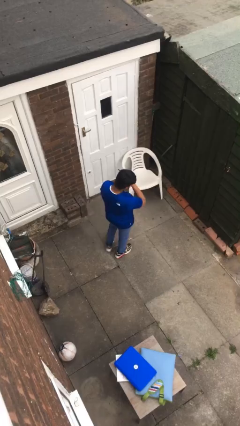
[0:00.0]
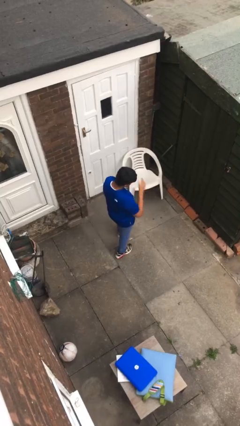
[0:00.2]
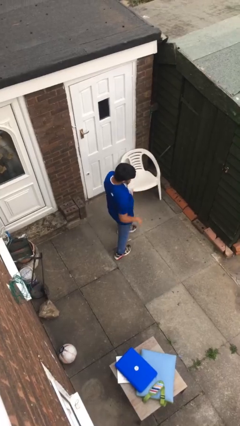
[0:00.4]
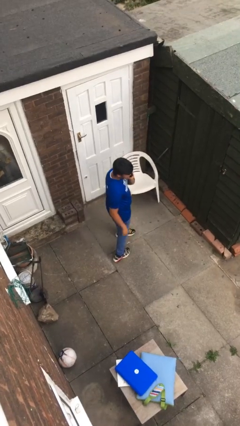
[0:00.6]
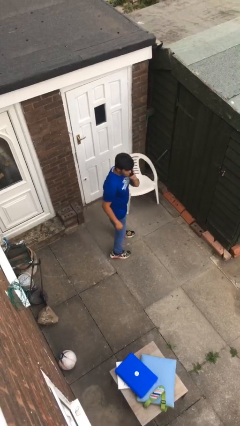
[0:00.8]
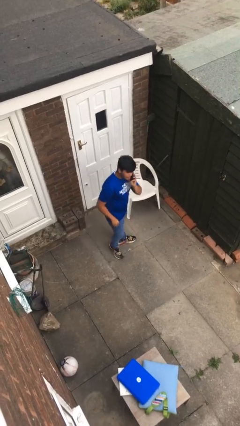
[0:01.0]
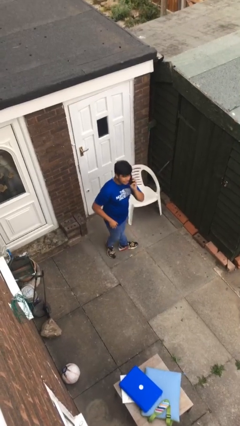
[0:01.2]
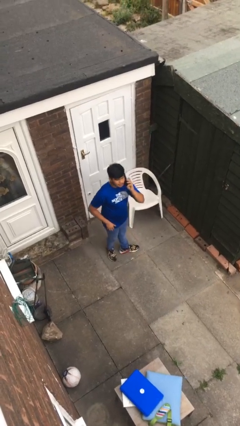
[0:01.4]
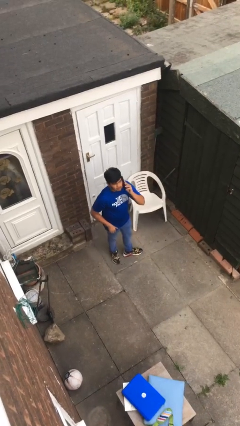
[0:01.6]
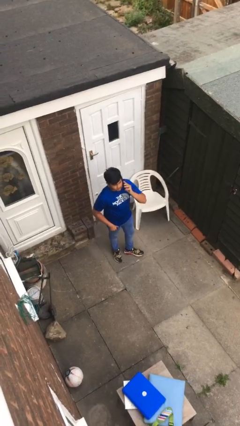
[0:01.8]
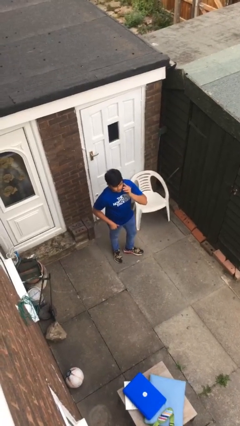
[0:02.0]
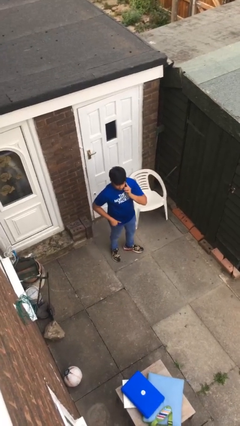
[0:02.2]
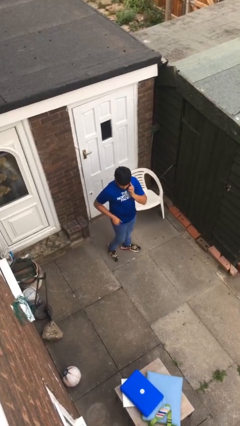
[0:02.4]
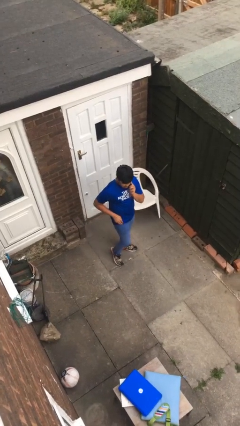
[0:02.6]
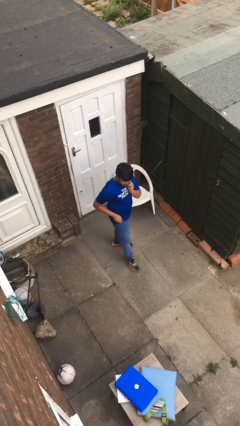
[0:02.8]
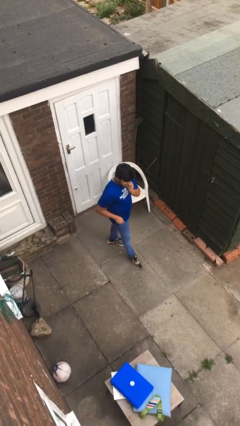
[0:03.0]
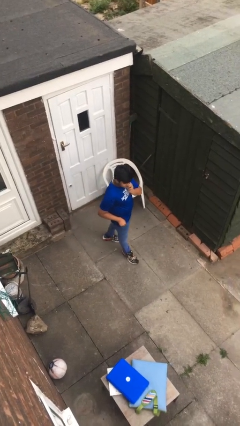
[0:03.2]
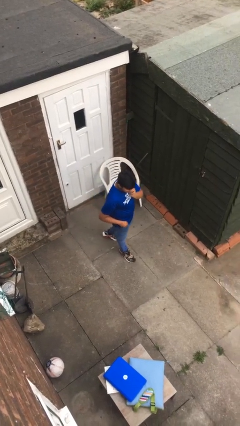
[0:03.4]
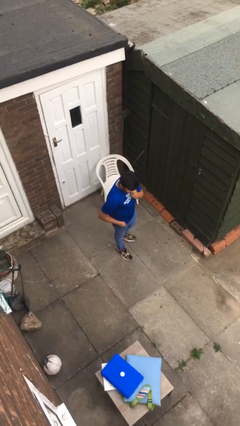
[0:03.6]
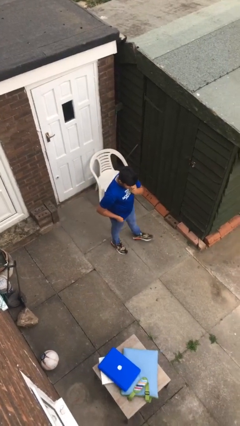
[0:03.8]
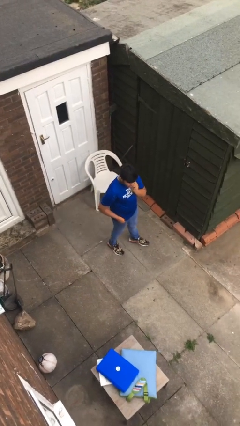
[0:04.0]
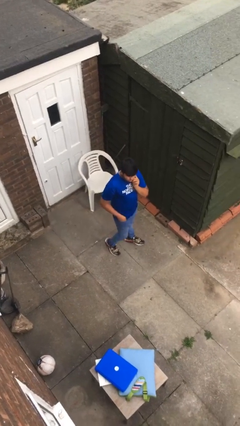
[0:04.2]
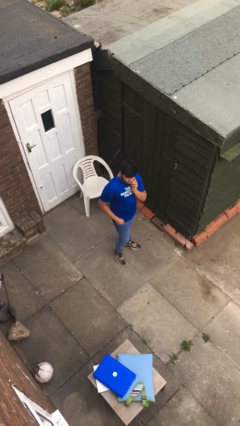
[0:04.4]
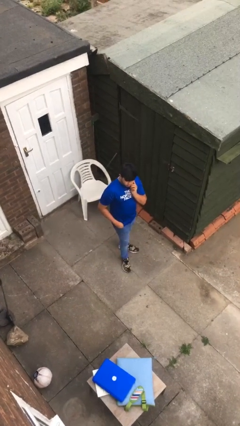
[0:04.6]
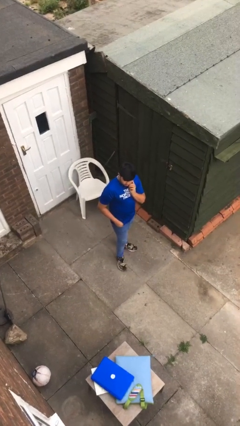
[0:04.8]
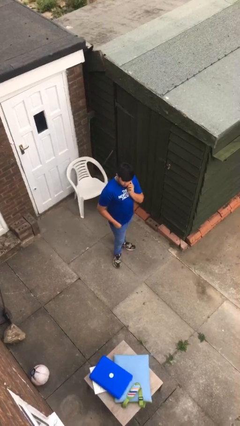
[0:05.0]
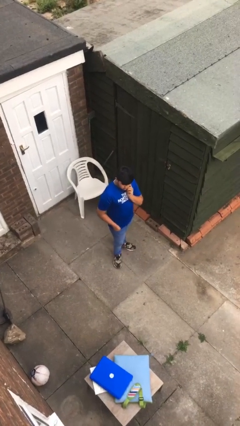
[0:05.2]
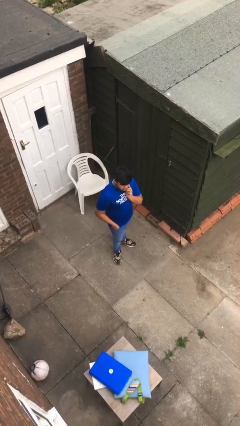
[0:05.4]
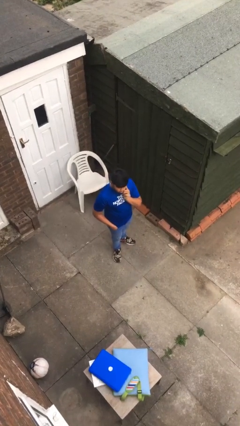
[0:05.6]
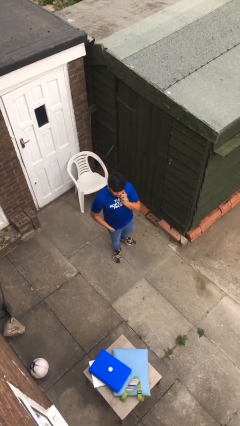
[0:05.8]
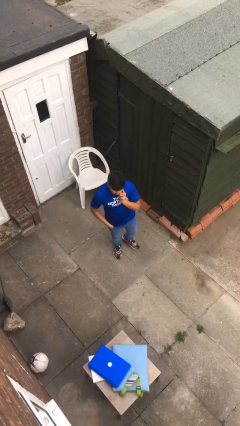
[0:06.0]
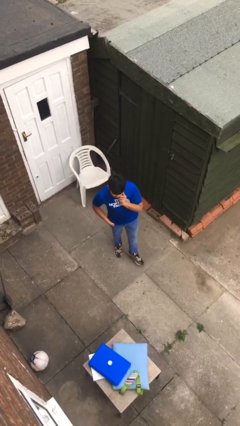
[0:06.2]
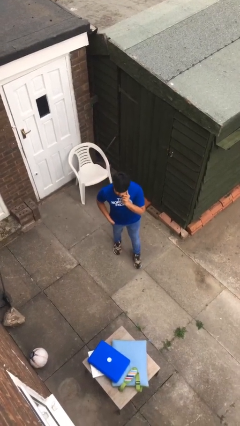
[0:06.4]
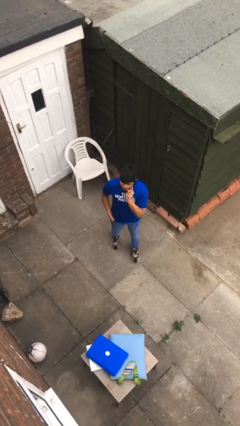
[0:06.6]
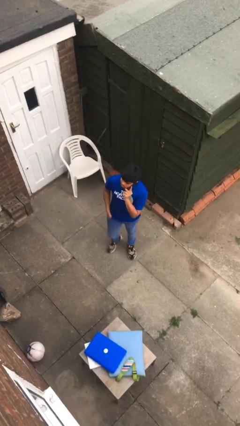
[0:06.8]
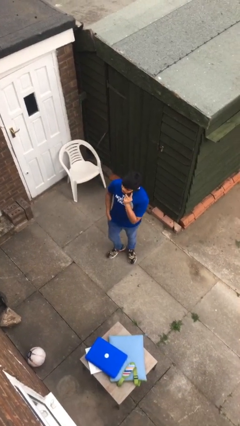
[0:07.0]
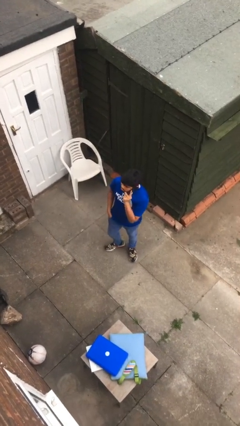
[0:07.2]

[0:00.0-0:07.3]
person talks on phone

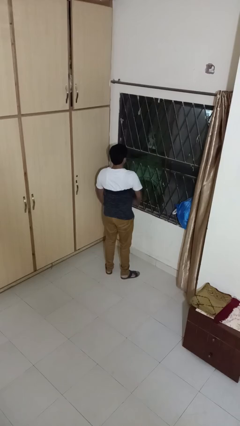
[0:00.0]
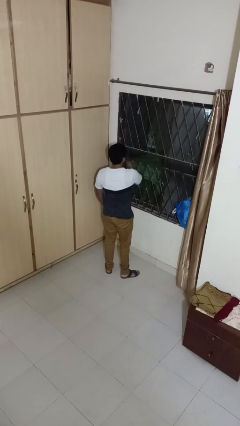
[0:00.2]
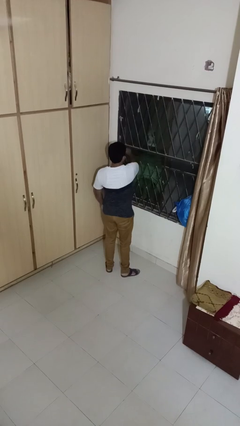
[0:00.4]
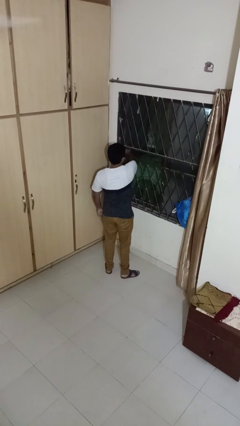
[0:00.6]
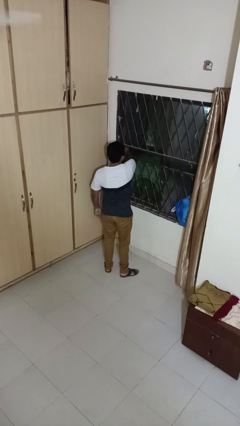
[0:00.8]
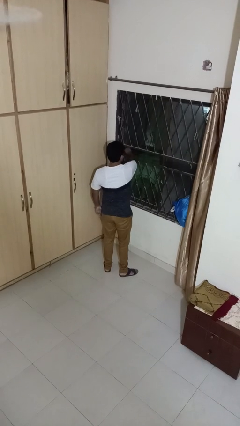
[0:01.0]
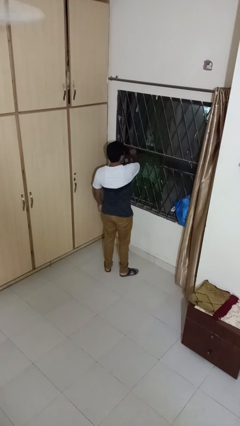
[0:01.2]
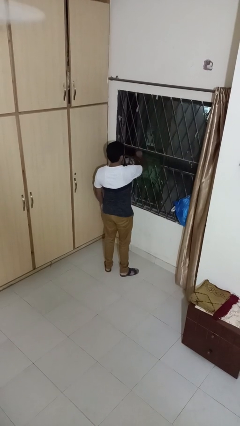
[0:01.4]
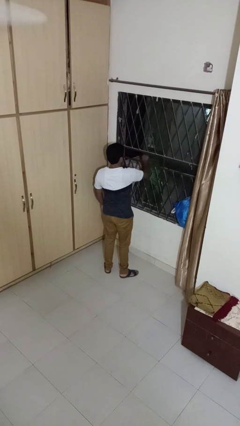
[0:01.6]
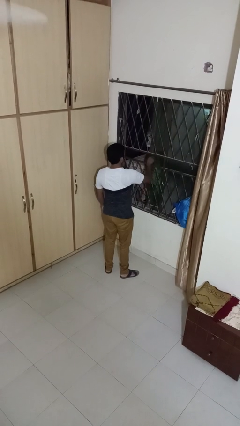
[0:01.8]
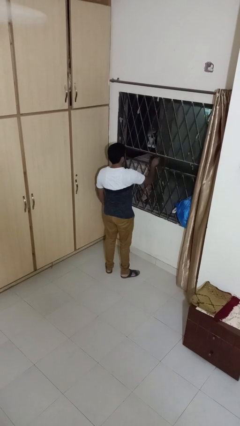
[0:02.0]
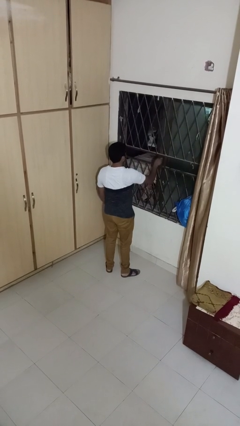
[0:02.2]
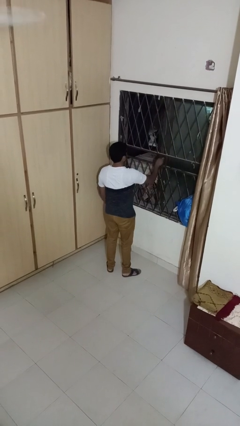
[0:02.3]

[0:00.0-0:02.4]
person opens home window

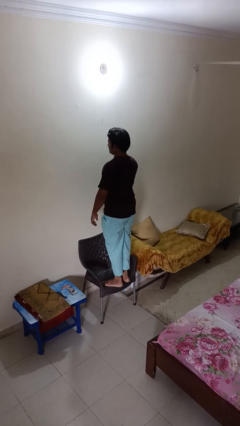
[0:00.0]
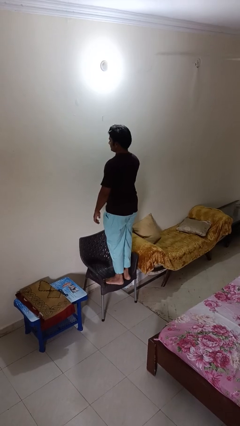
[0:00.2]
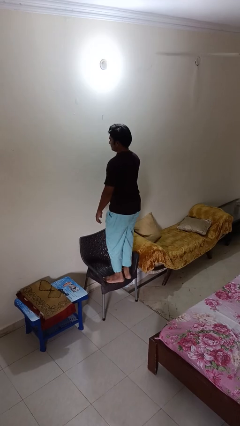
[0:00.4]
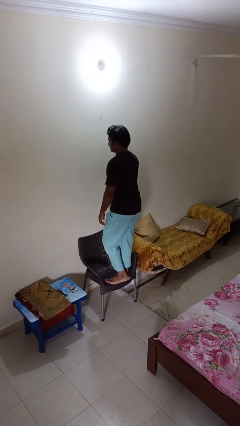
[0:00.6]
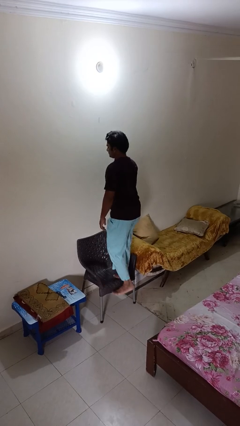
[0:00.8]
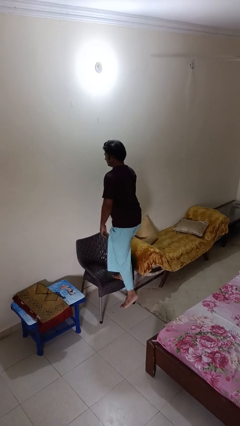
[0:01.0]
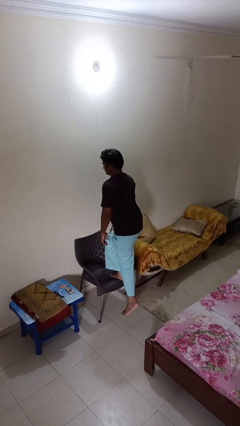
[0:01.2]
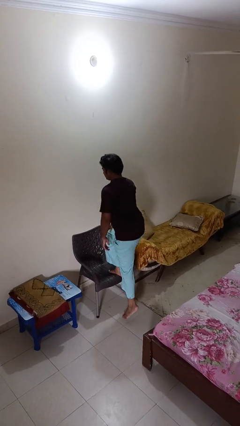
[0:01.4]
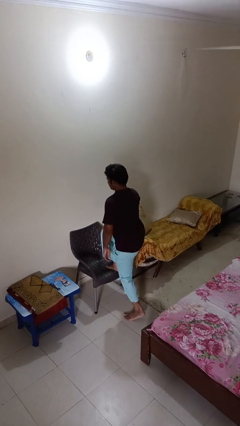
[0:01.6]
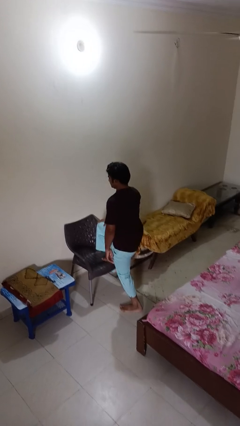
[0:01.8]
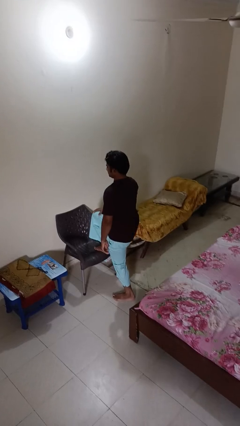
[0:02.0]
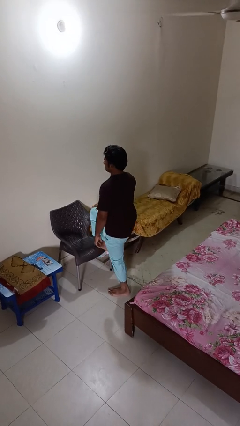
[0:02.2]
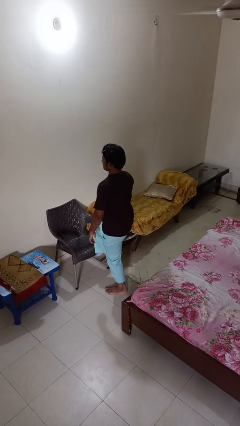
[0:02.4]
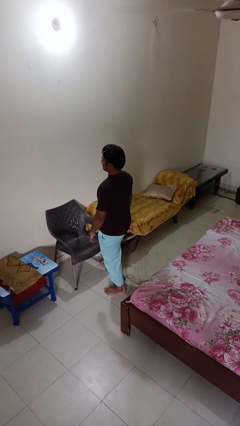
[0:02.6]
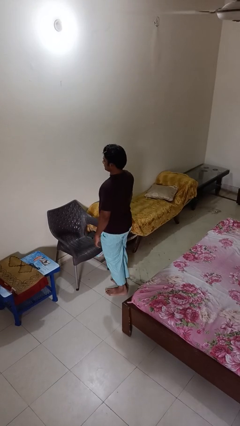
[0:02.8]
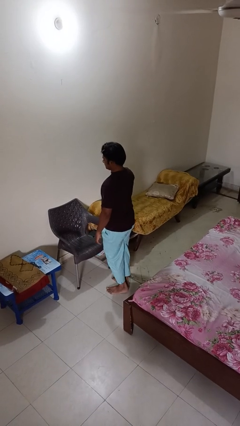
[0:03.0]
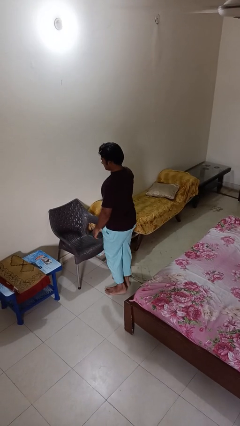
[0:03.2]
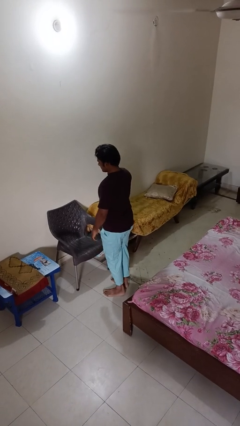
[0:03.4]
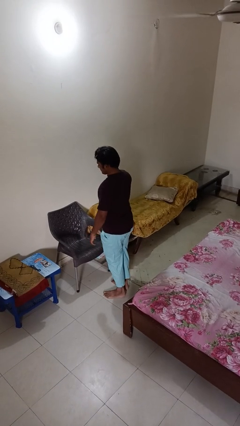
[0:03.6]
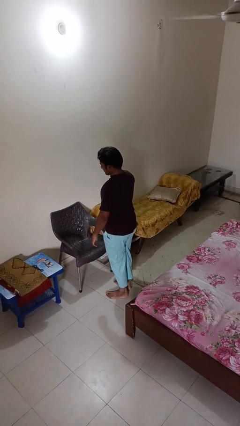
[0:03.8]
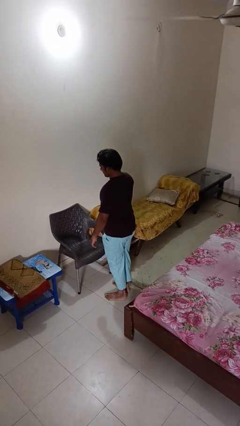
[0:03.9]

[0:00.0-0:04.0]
person climbs off chair

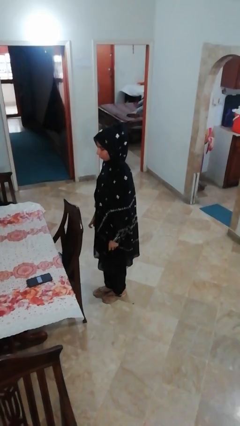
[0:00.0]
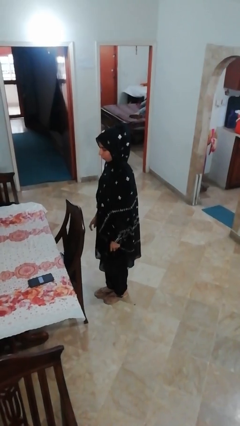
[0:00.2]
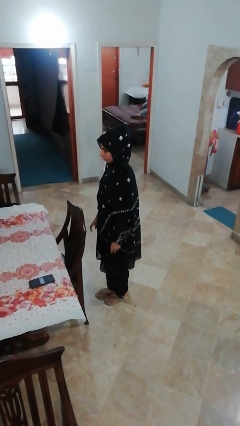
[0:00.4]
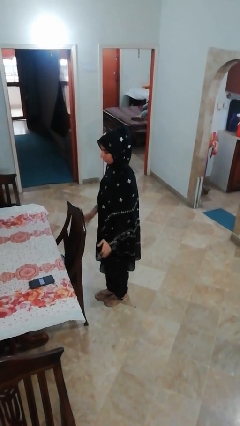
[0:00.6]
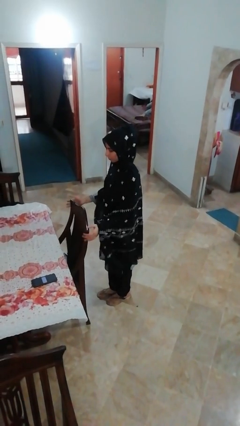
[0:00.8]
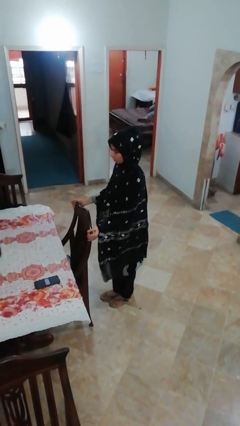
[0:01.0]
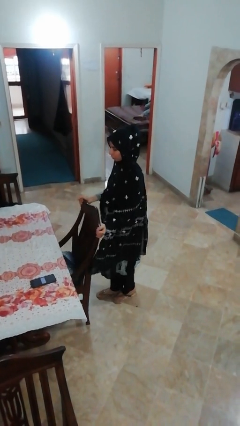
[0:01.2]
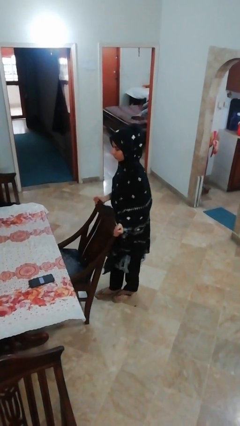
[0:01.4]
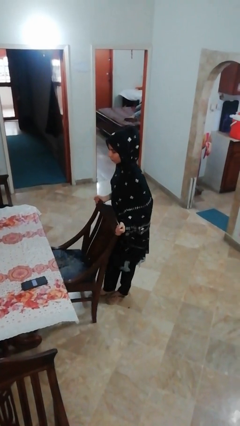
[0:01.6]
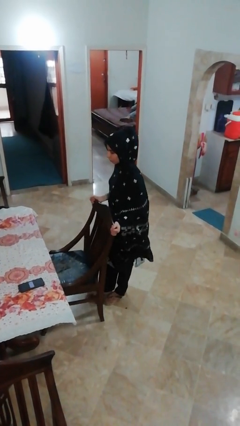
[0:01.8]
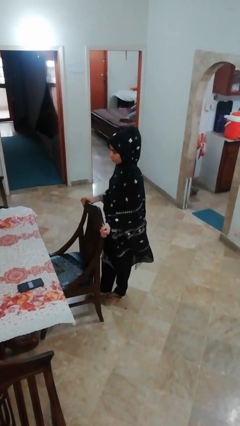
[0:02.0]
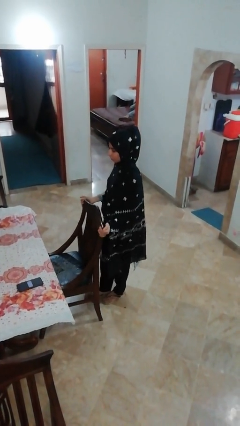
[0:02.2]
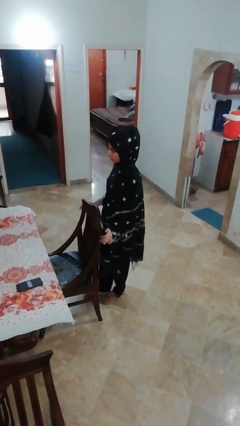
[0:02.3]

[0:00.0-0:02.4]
person pulls out chair

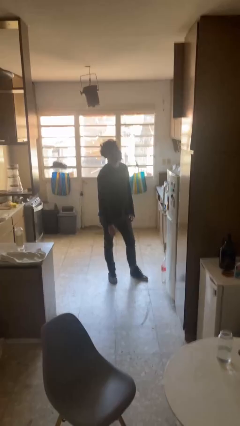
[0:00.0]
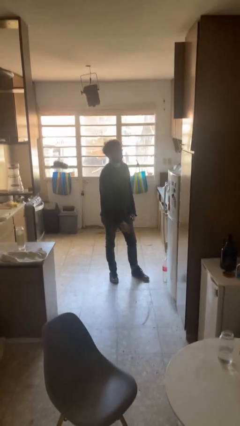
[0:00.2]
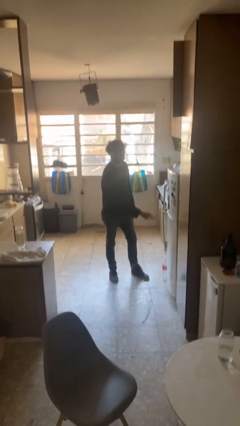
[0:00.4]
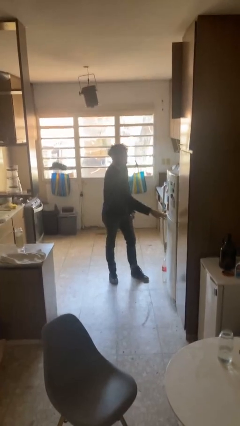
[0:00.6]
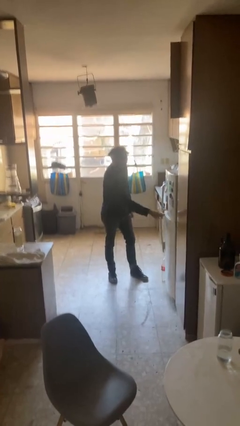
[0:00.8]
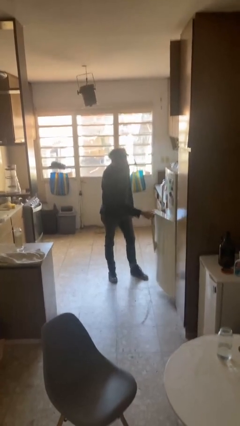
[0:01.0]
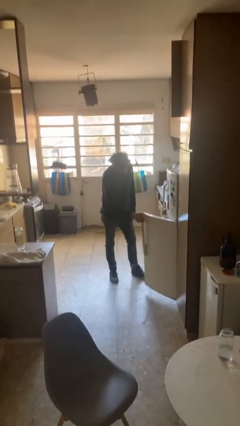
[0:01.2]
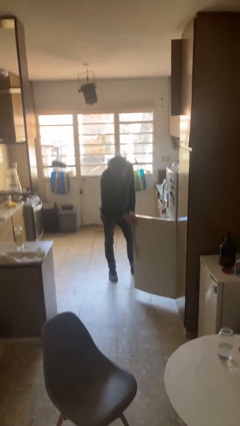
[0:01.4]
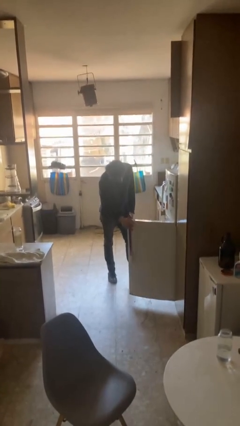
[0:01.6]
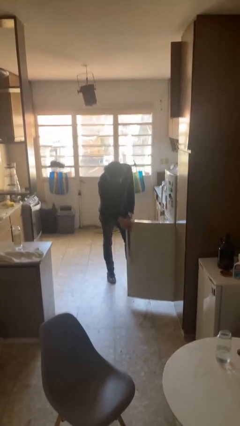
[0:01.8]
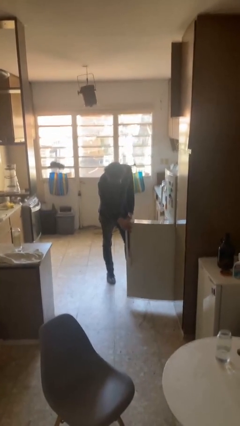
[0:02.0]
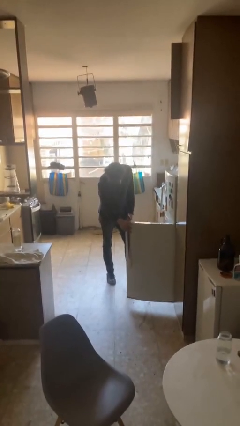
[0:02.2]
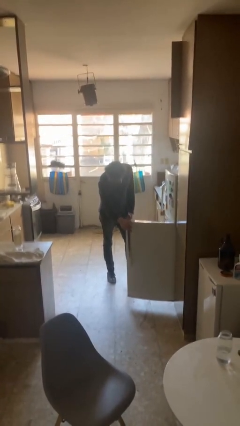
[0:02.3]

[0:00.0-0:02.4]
person opens refrigerator
